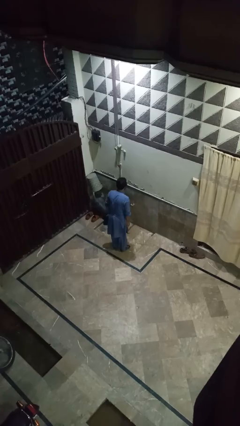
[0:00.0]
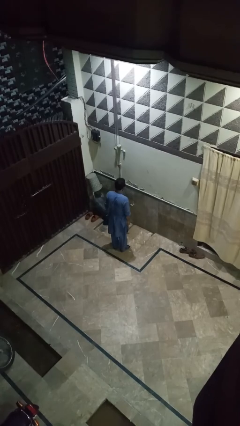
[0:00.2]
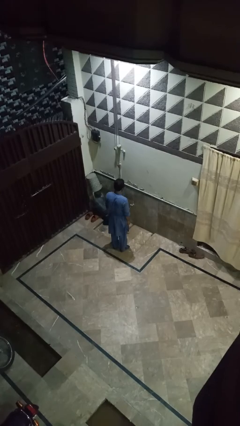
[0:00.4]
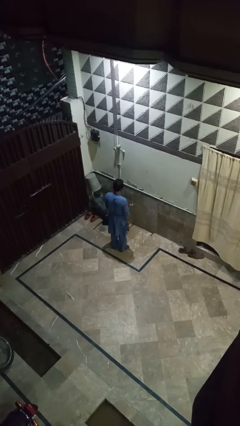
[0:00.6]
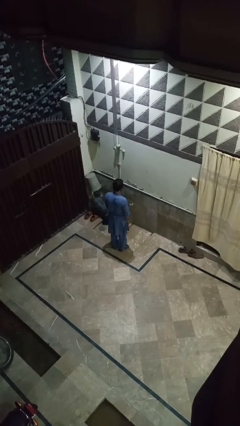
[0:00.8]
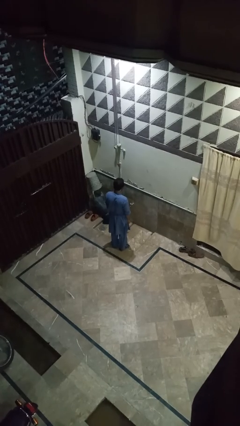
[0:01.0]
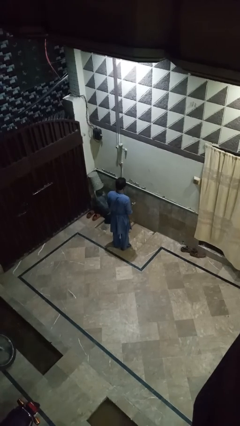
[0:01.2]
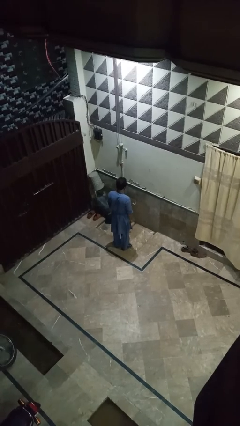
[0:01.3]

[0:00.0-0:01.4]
person turns off faucet

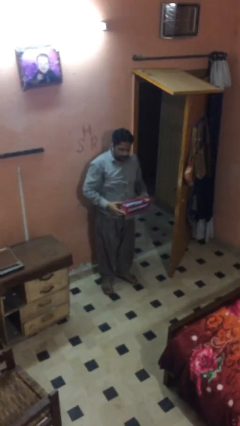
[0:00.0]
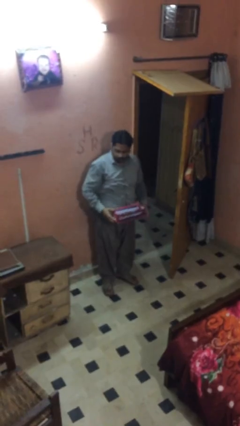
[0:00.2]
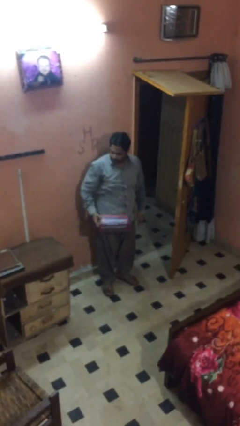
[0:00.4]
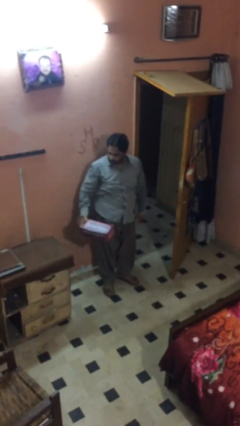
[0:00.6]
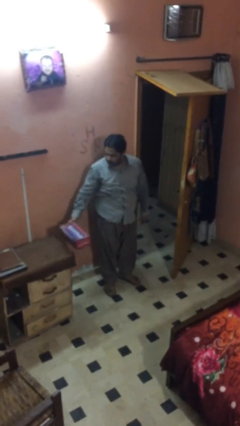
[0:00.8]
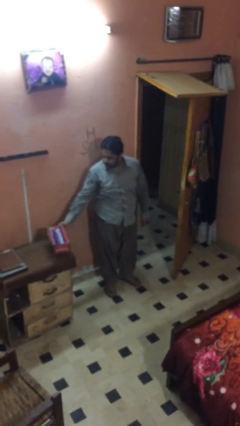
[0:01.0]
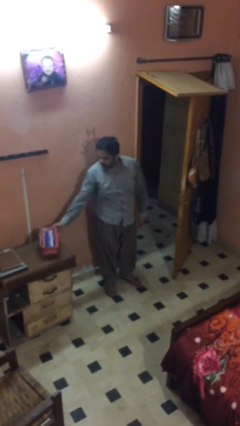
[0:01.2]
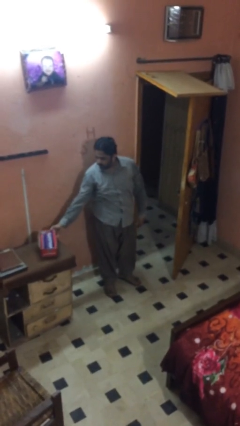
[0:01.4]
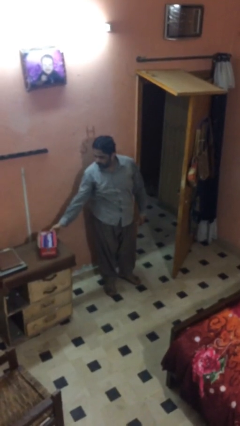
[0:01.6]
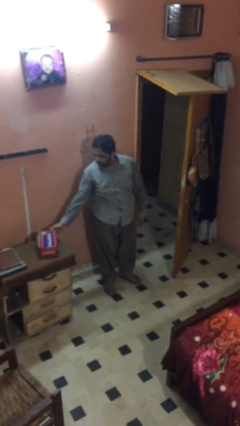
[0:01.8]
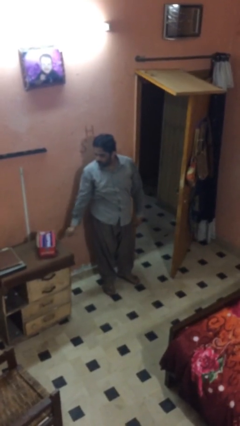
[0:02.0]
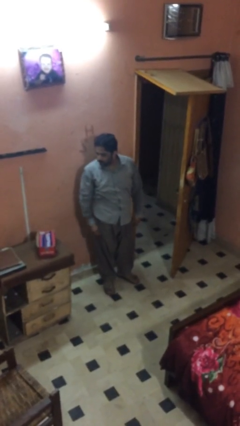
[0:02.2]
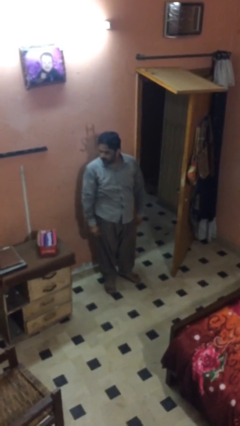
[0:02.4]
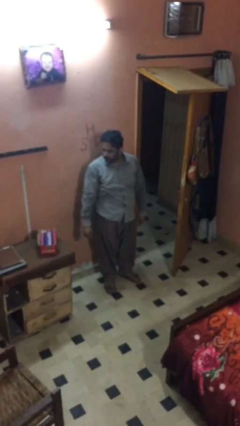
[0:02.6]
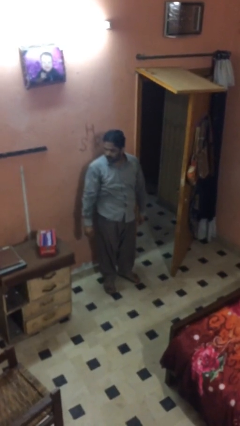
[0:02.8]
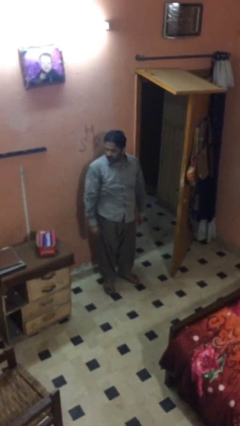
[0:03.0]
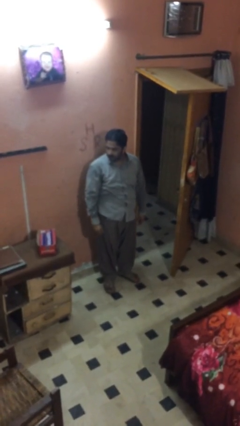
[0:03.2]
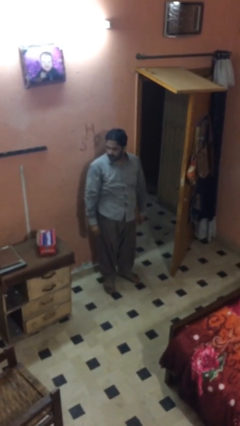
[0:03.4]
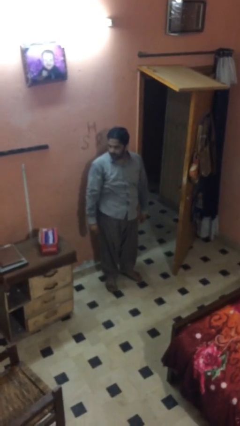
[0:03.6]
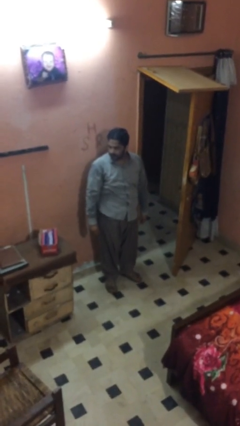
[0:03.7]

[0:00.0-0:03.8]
person puts down object on table

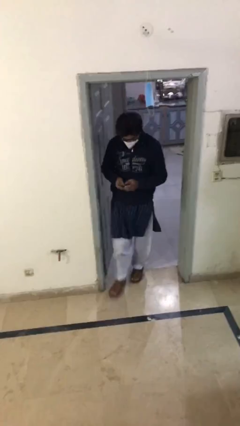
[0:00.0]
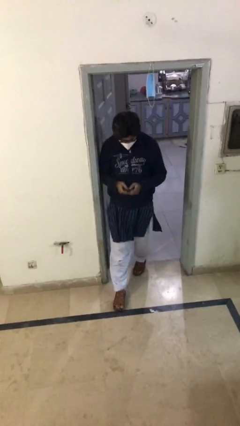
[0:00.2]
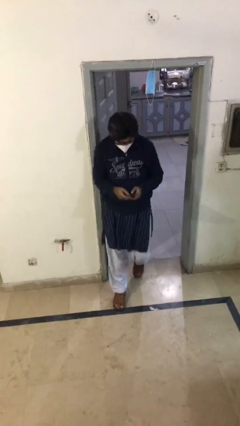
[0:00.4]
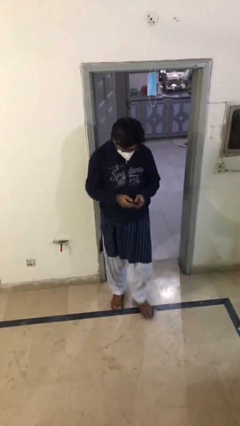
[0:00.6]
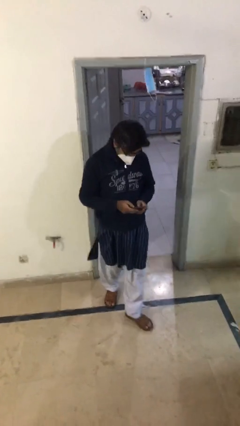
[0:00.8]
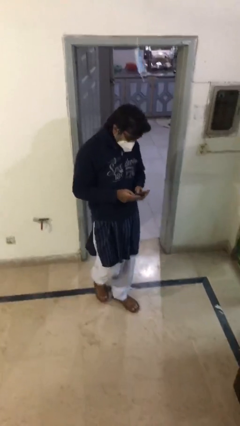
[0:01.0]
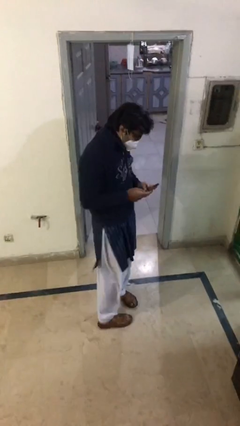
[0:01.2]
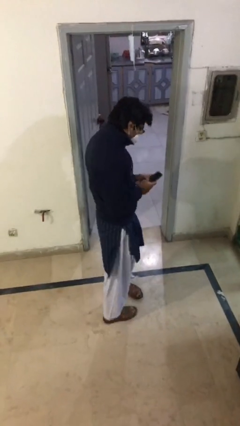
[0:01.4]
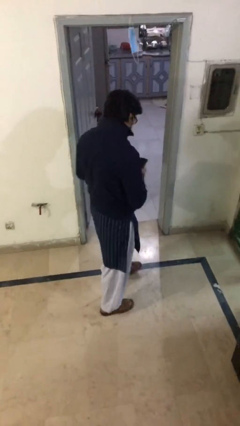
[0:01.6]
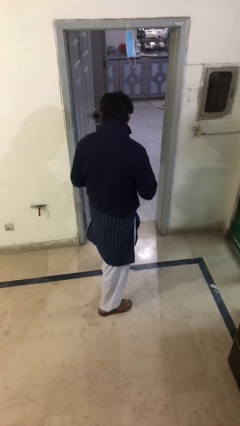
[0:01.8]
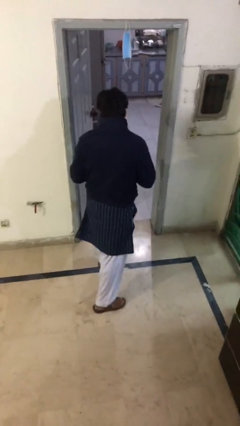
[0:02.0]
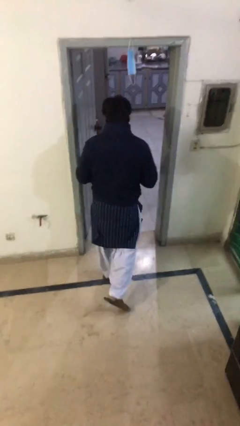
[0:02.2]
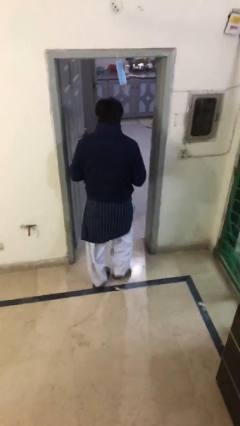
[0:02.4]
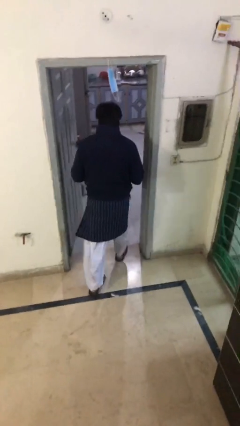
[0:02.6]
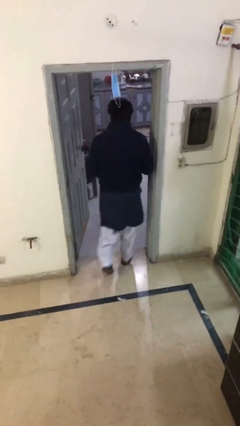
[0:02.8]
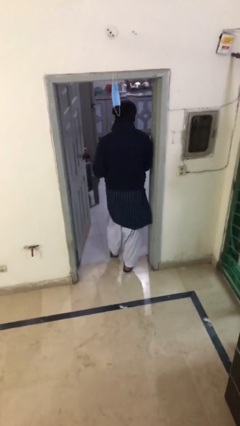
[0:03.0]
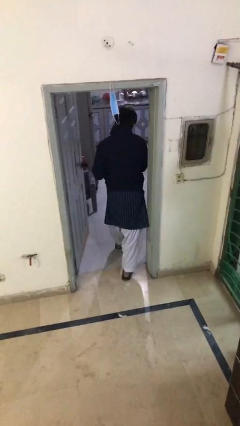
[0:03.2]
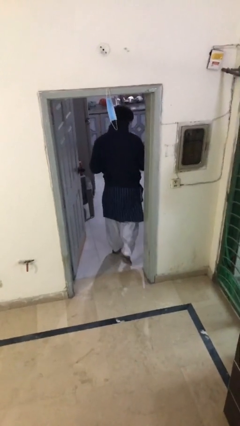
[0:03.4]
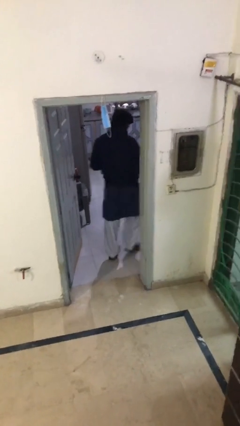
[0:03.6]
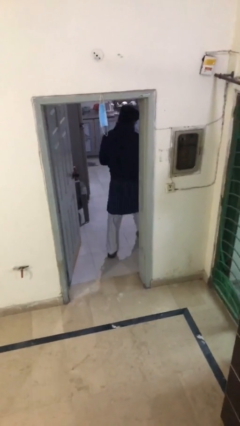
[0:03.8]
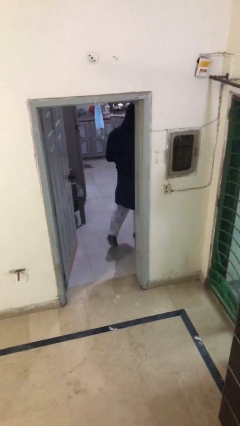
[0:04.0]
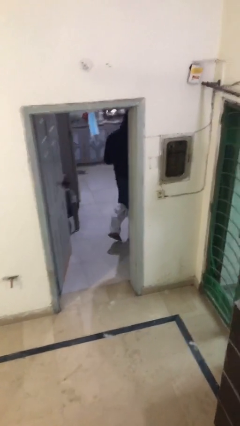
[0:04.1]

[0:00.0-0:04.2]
person exits scene through structure

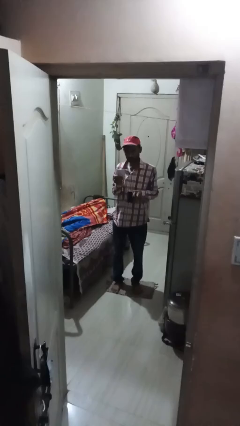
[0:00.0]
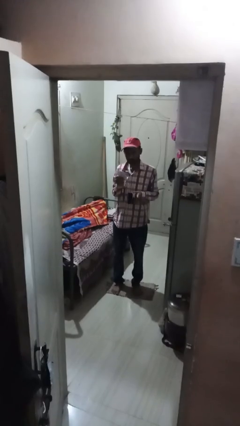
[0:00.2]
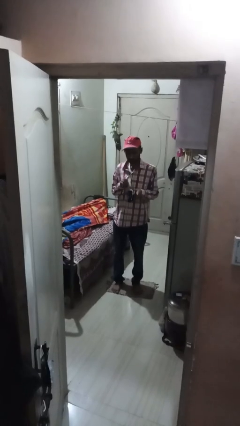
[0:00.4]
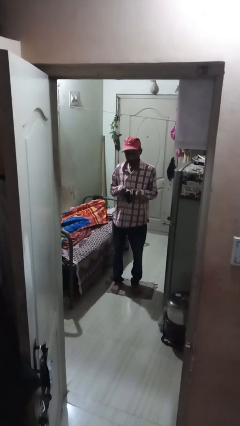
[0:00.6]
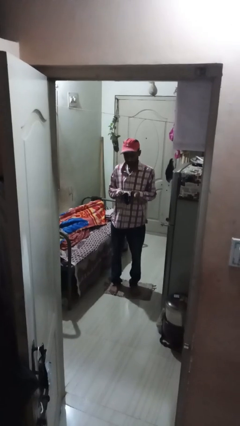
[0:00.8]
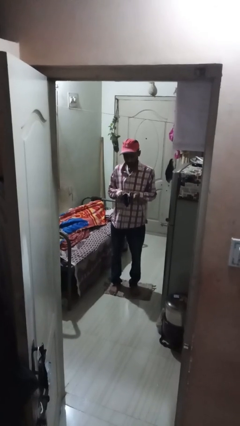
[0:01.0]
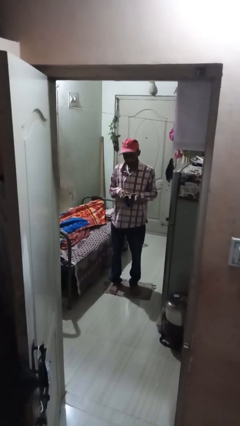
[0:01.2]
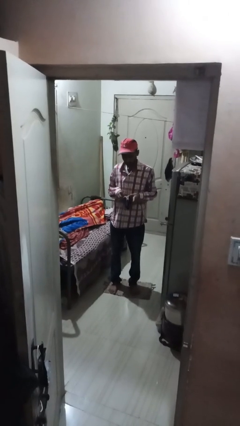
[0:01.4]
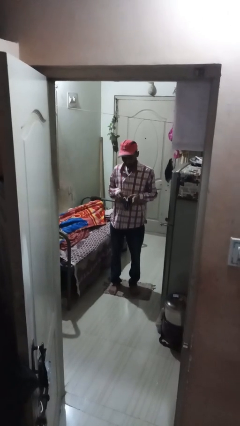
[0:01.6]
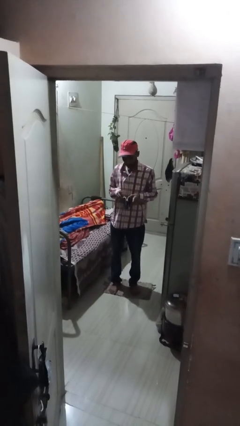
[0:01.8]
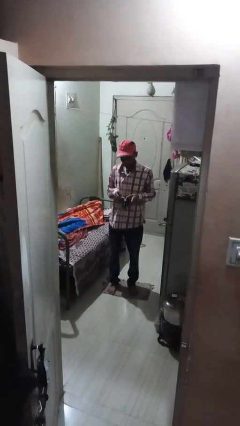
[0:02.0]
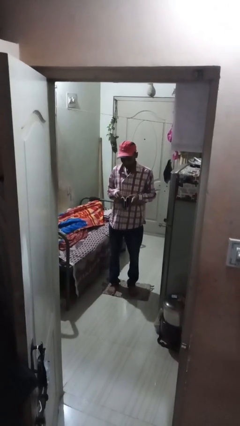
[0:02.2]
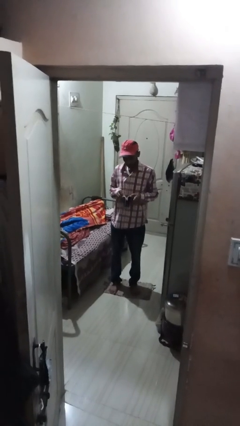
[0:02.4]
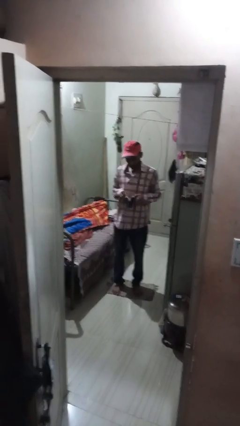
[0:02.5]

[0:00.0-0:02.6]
person puts object into purse

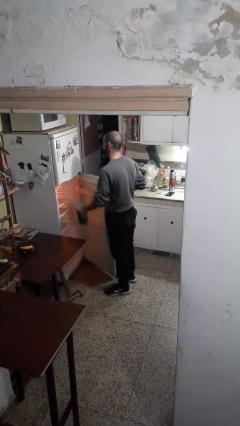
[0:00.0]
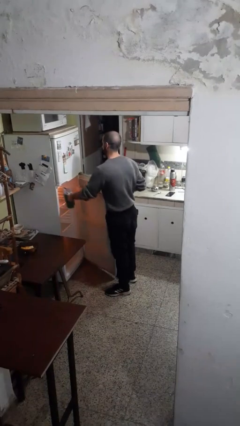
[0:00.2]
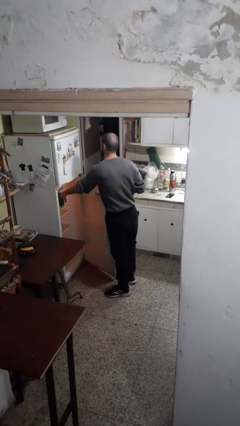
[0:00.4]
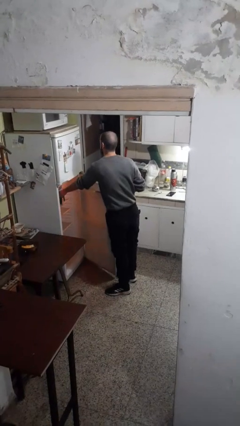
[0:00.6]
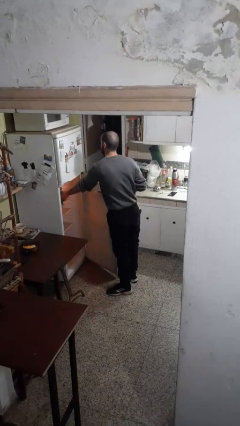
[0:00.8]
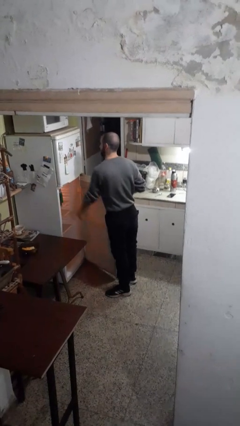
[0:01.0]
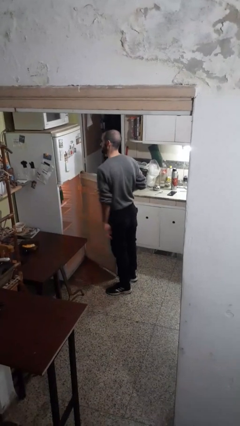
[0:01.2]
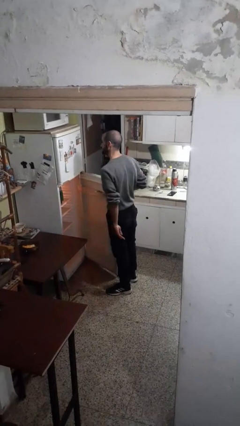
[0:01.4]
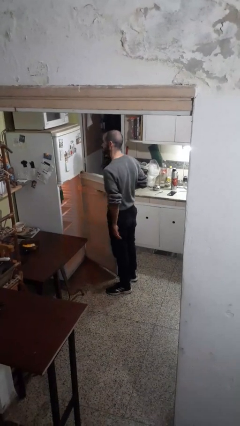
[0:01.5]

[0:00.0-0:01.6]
person puts object into refrigerator

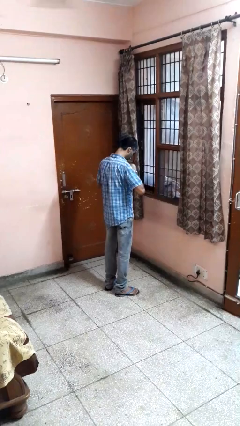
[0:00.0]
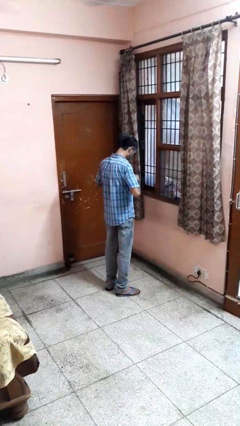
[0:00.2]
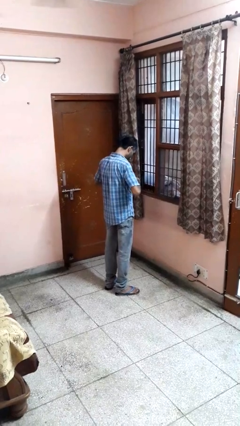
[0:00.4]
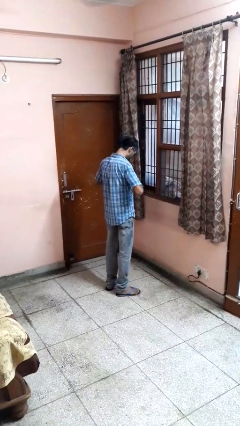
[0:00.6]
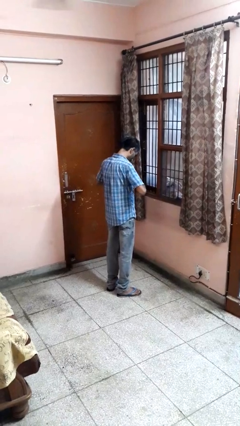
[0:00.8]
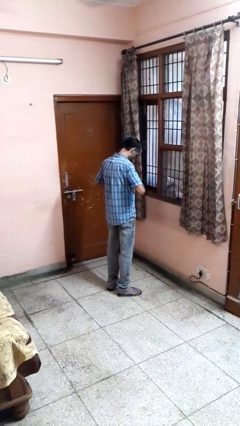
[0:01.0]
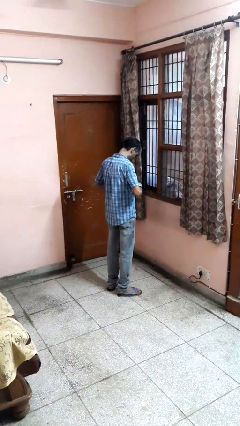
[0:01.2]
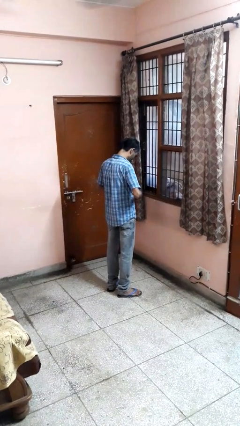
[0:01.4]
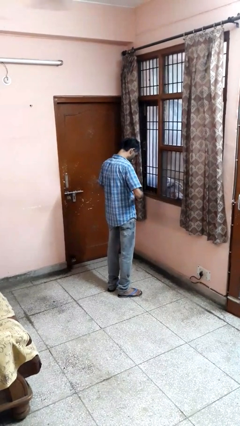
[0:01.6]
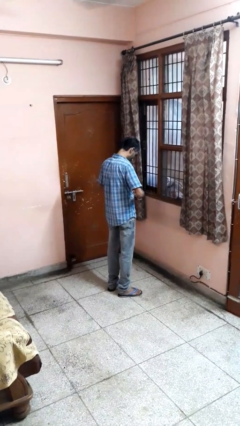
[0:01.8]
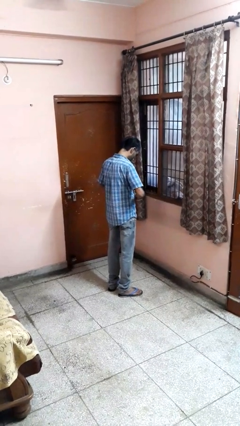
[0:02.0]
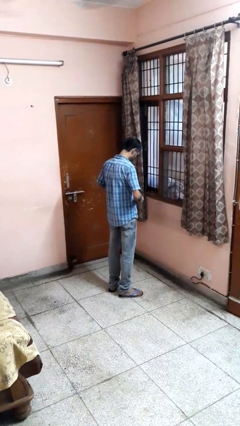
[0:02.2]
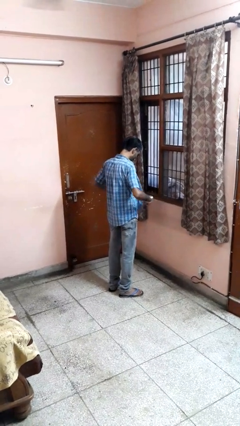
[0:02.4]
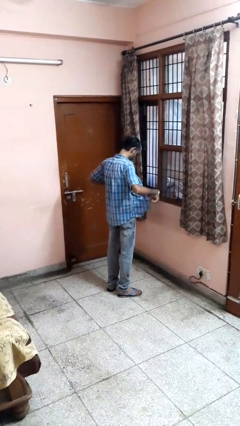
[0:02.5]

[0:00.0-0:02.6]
person unbuttons shirt

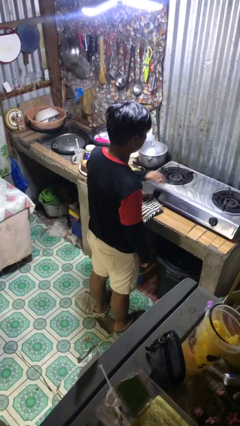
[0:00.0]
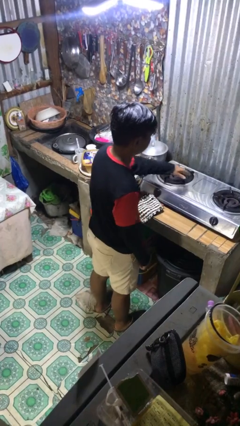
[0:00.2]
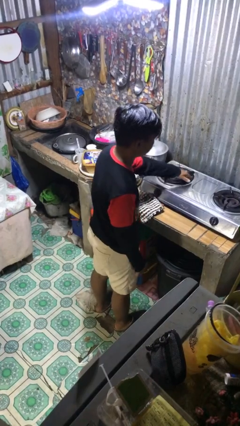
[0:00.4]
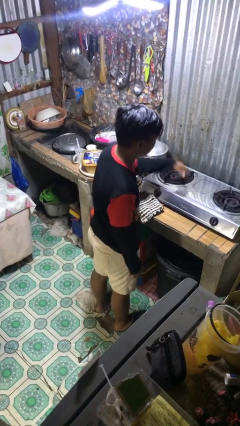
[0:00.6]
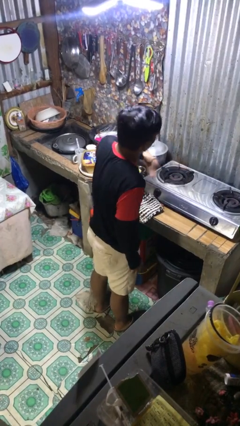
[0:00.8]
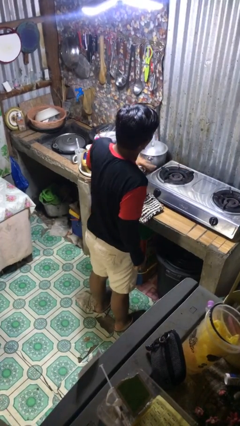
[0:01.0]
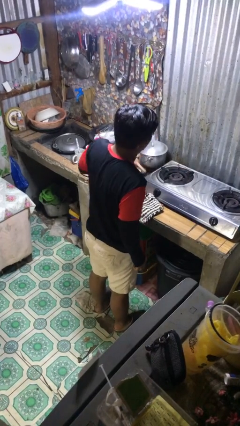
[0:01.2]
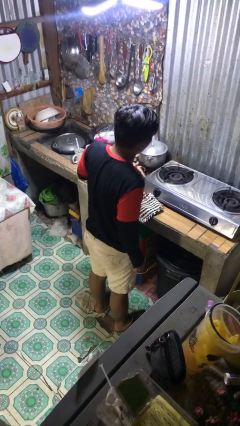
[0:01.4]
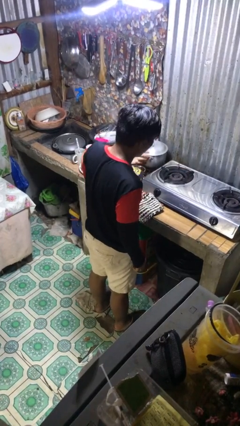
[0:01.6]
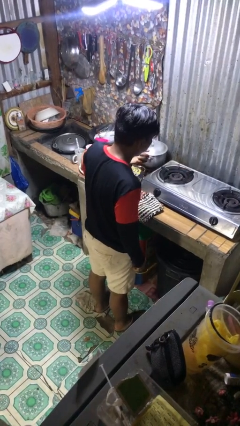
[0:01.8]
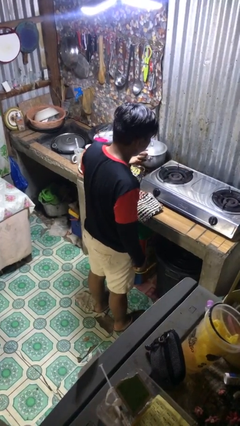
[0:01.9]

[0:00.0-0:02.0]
person burns hand
